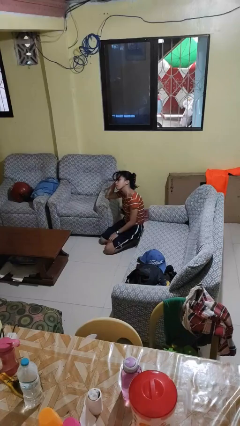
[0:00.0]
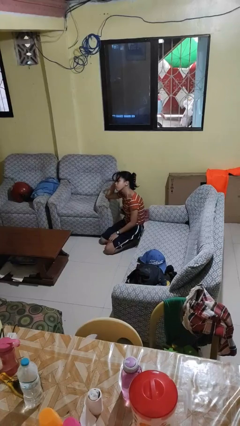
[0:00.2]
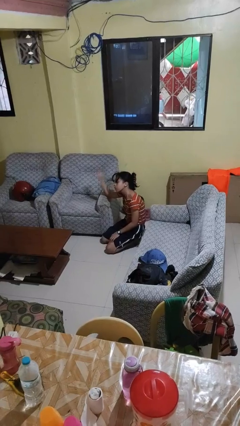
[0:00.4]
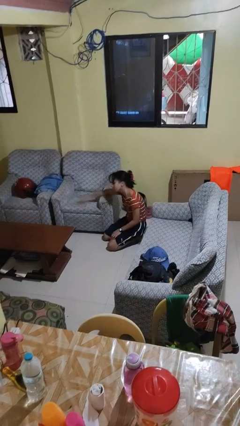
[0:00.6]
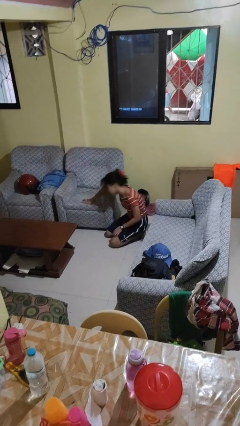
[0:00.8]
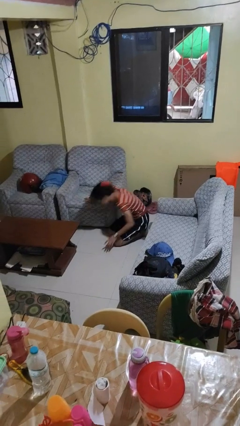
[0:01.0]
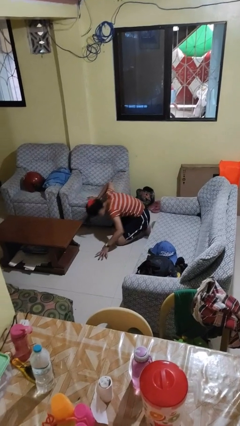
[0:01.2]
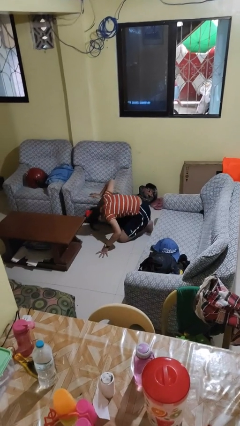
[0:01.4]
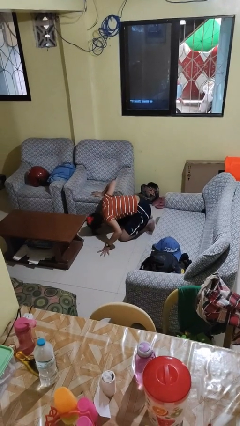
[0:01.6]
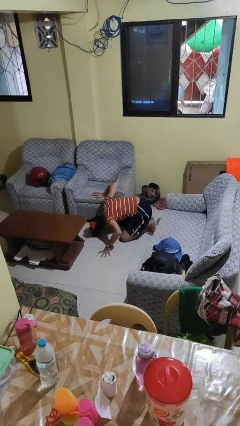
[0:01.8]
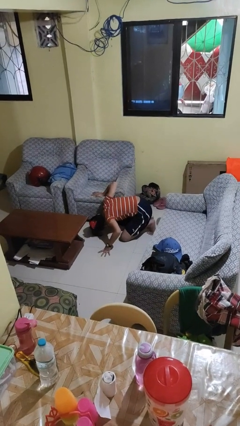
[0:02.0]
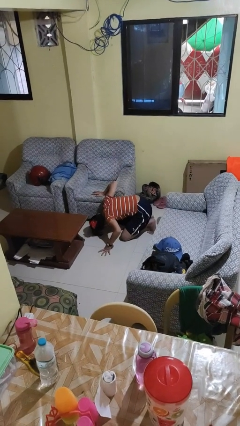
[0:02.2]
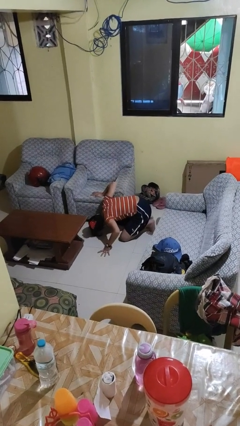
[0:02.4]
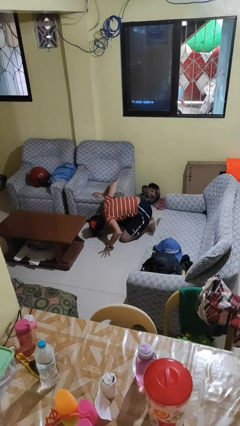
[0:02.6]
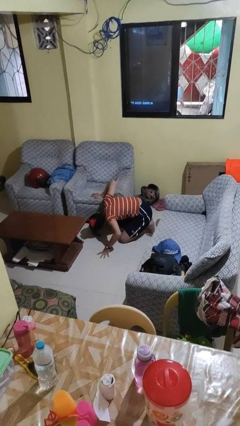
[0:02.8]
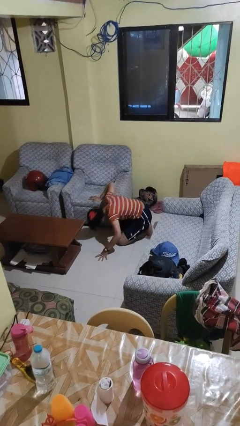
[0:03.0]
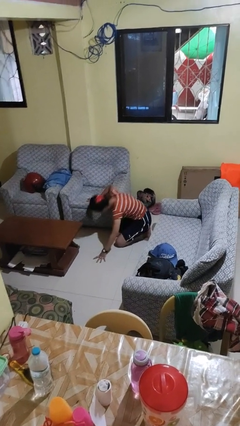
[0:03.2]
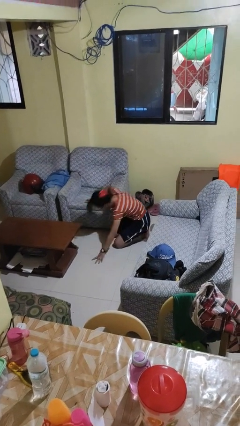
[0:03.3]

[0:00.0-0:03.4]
person searches under couch

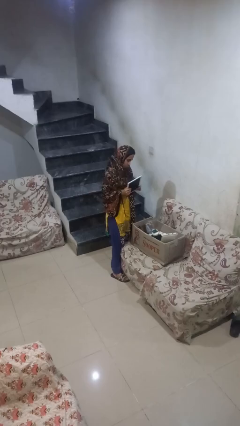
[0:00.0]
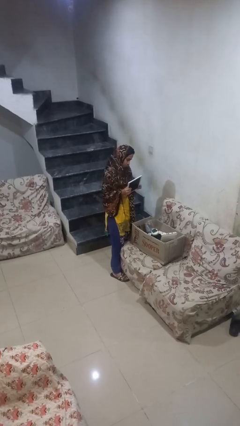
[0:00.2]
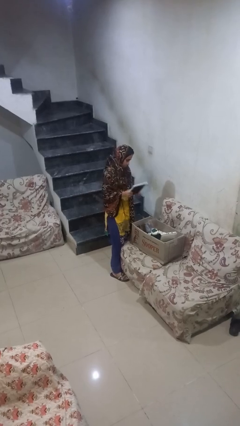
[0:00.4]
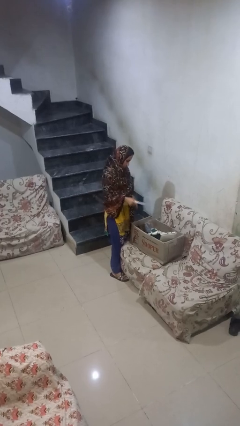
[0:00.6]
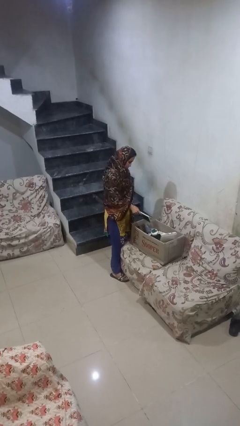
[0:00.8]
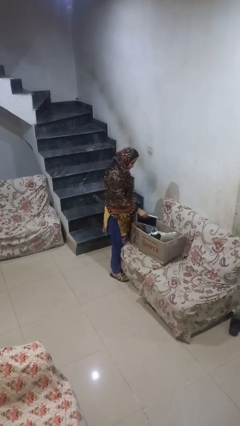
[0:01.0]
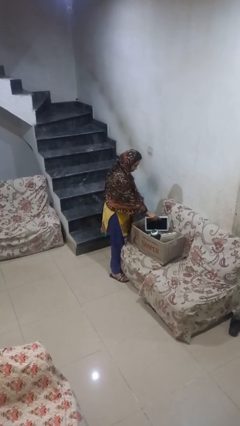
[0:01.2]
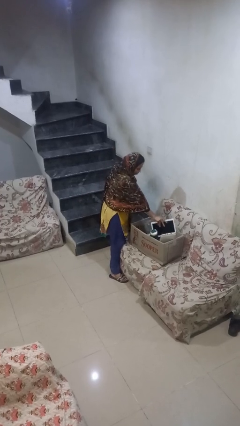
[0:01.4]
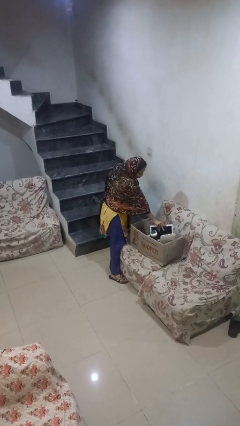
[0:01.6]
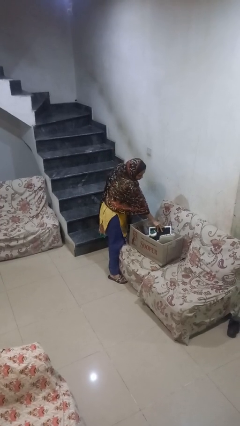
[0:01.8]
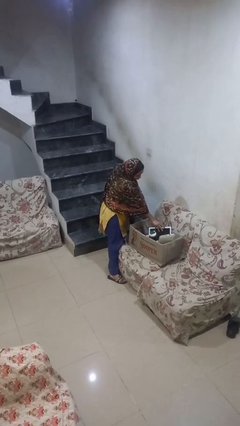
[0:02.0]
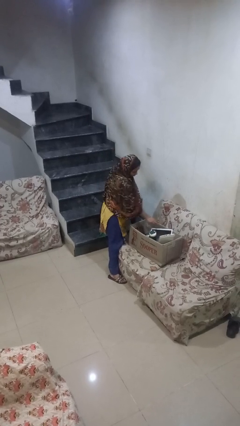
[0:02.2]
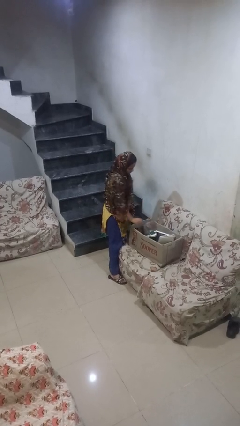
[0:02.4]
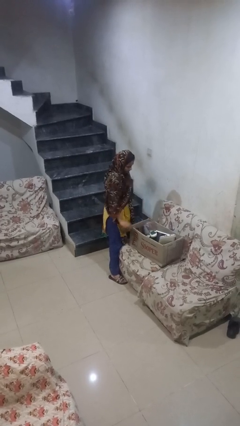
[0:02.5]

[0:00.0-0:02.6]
person puts object into box

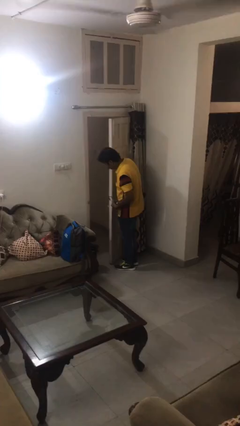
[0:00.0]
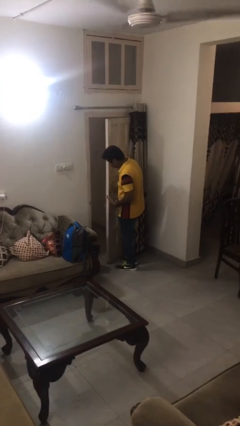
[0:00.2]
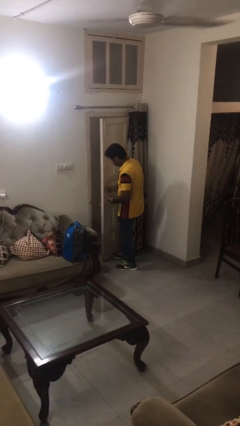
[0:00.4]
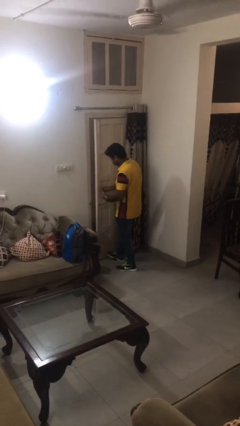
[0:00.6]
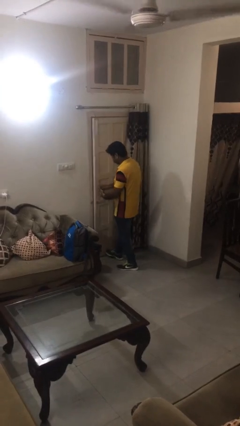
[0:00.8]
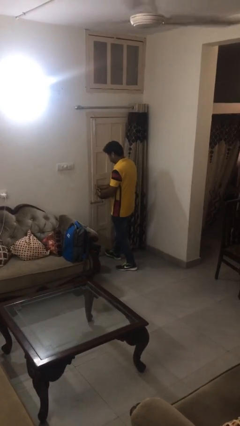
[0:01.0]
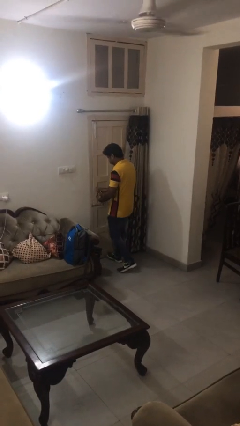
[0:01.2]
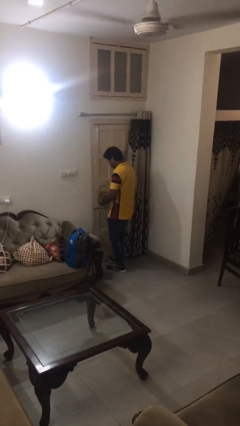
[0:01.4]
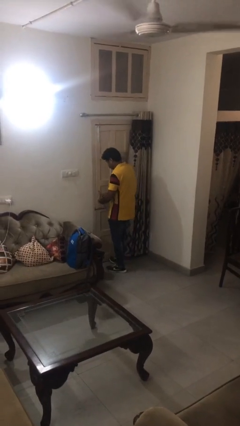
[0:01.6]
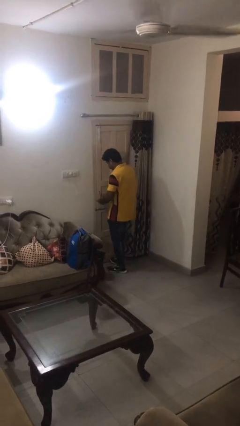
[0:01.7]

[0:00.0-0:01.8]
person closes facility door

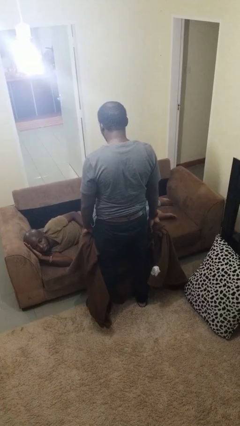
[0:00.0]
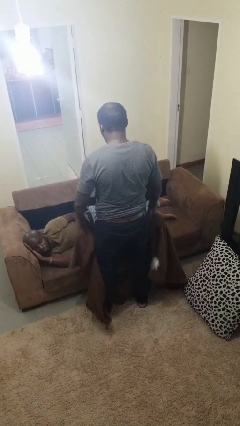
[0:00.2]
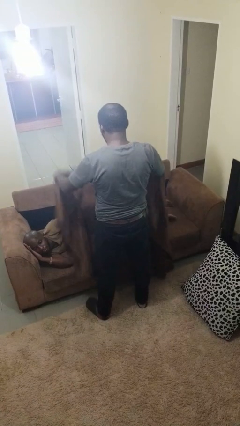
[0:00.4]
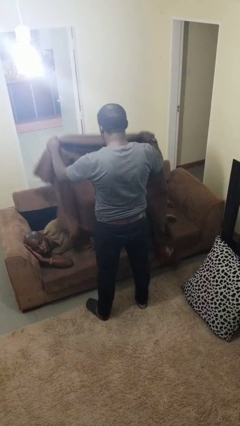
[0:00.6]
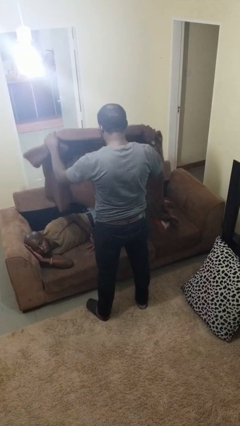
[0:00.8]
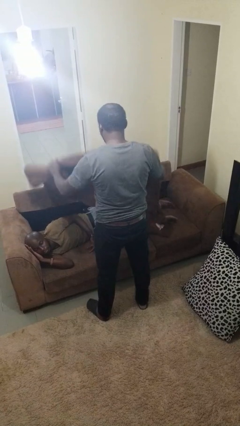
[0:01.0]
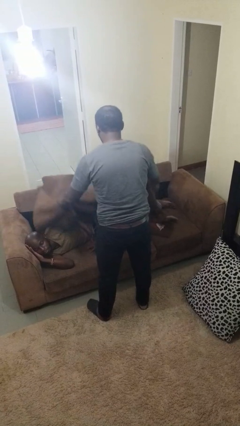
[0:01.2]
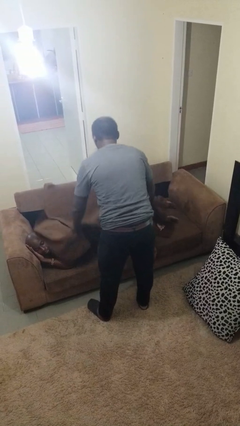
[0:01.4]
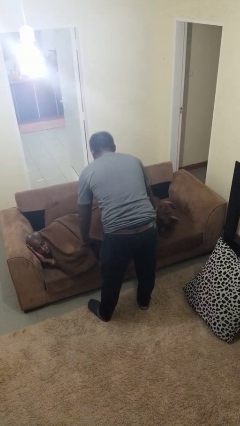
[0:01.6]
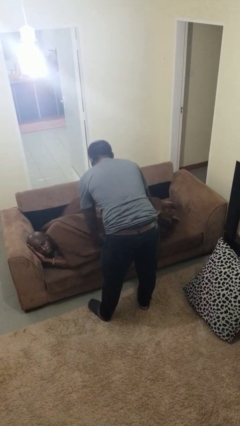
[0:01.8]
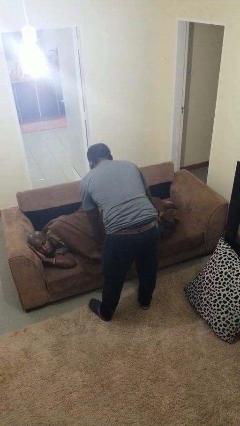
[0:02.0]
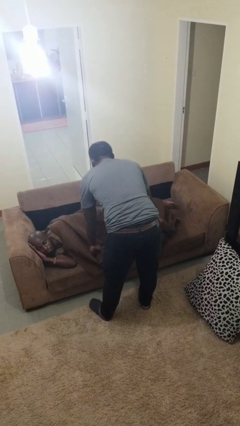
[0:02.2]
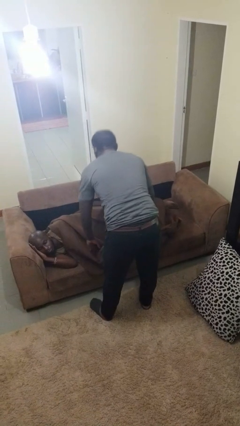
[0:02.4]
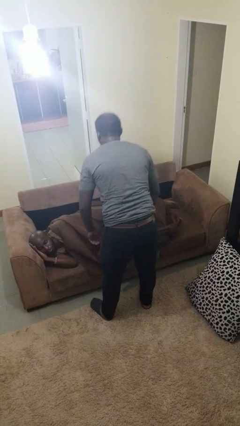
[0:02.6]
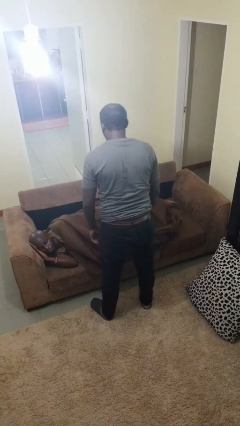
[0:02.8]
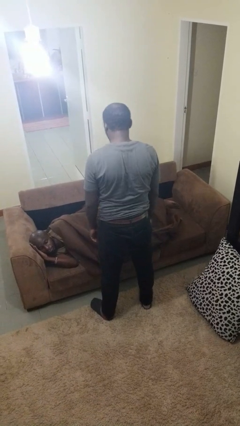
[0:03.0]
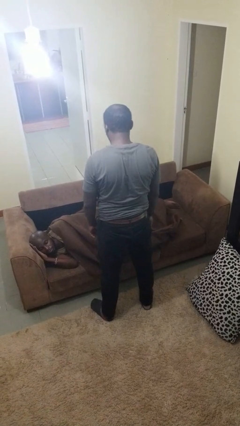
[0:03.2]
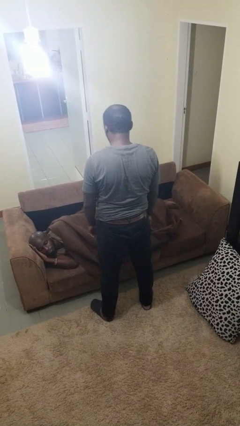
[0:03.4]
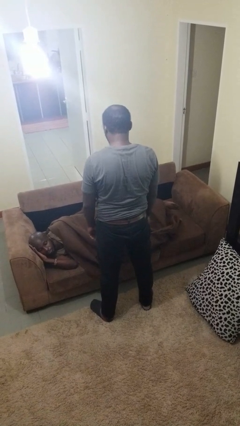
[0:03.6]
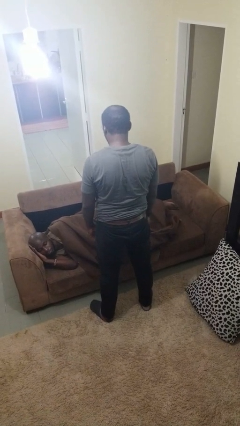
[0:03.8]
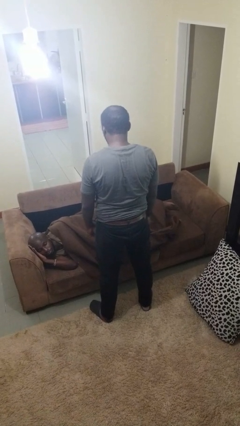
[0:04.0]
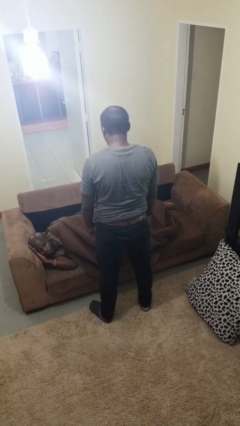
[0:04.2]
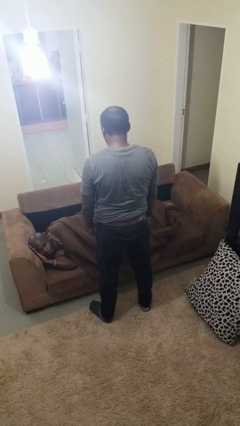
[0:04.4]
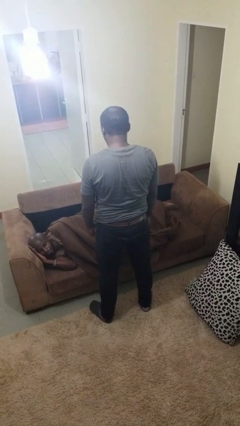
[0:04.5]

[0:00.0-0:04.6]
person covers friend with blanket

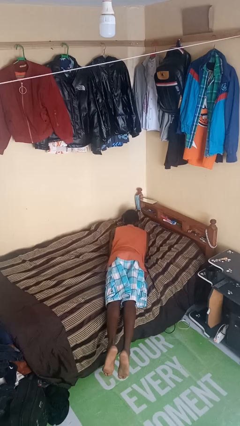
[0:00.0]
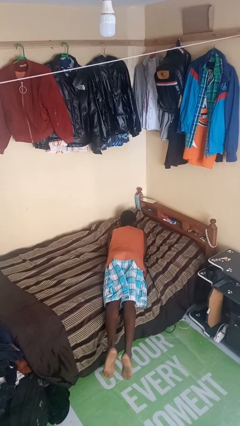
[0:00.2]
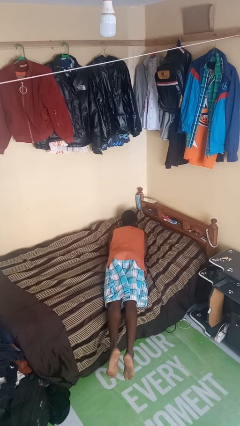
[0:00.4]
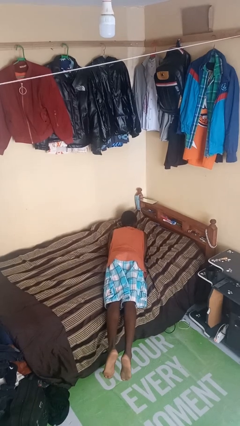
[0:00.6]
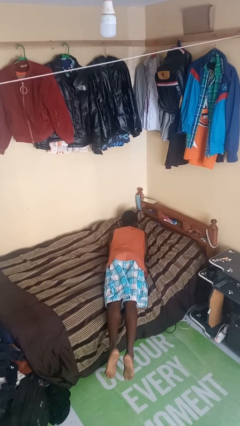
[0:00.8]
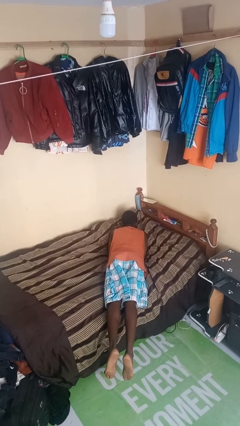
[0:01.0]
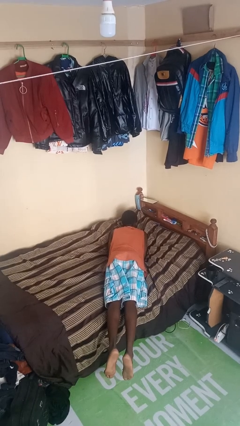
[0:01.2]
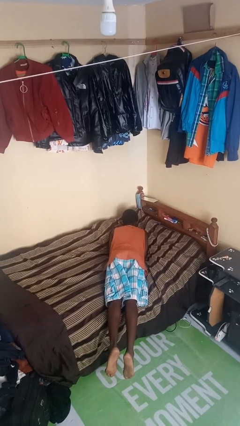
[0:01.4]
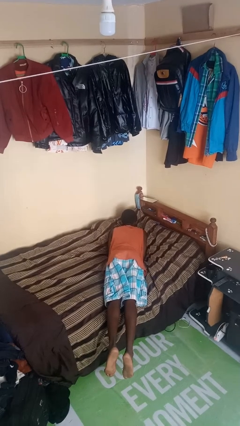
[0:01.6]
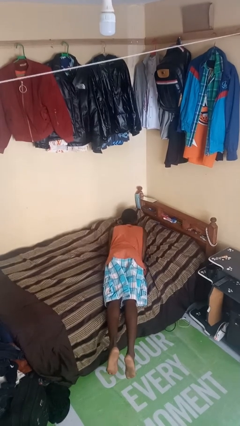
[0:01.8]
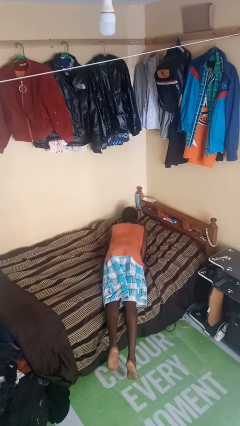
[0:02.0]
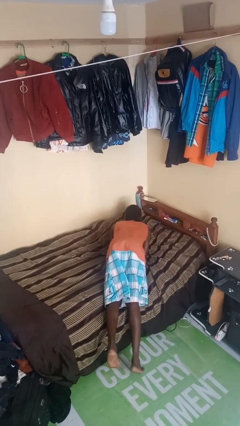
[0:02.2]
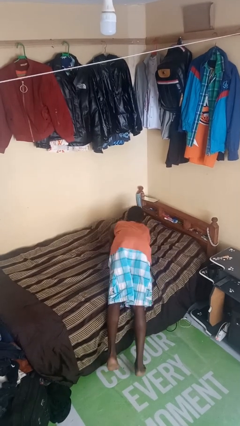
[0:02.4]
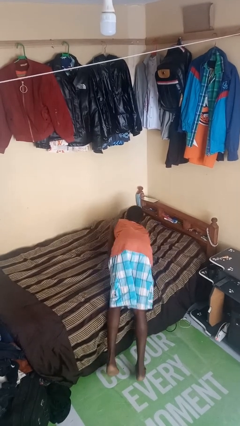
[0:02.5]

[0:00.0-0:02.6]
person lies down on bed

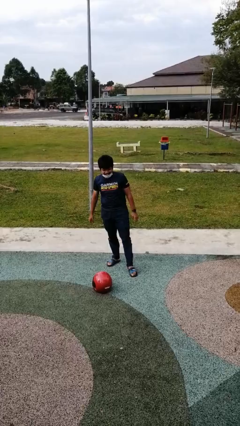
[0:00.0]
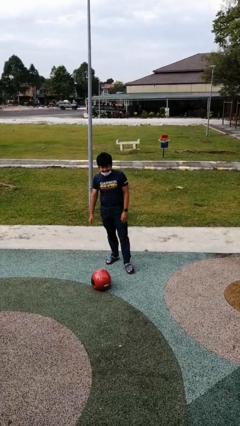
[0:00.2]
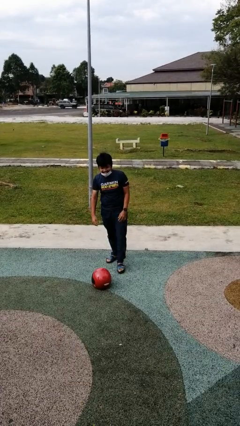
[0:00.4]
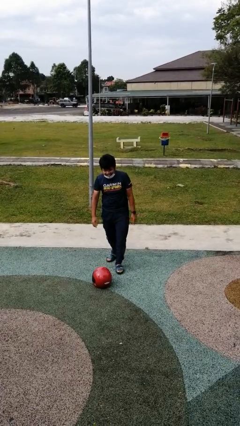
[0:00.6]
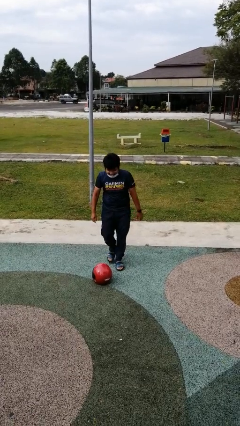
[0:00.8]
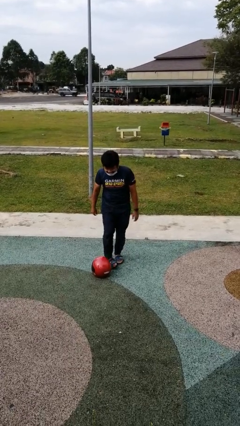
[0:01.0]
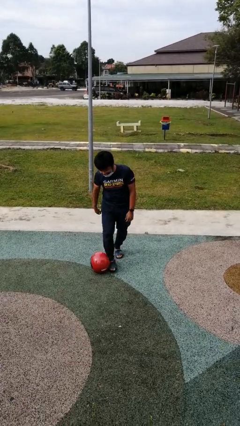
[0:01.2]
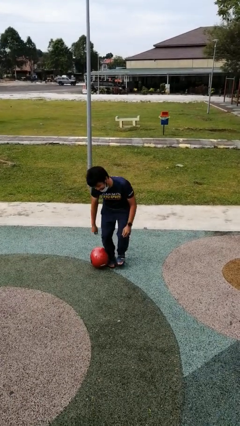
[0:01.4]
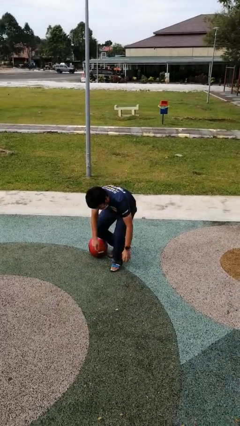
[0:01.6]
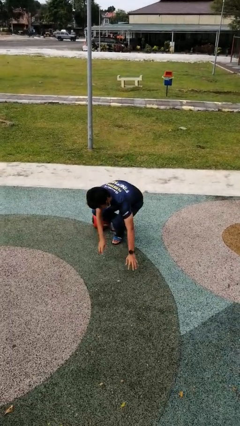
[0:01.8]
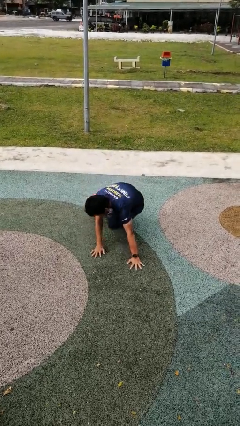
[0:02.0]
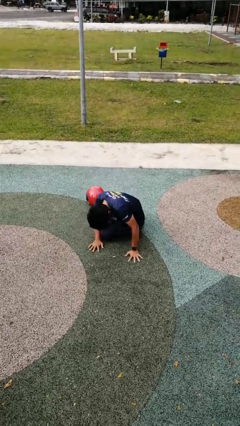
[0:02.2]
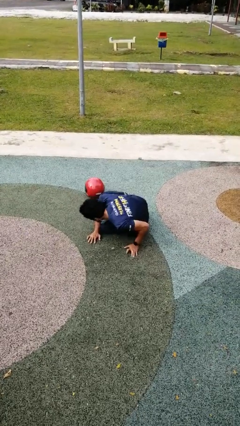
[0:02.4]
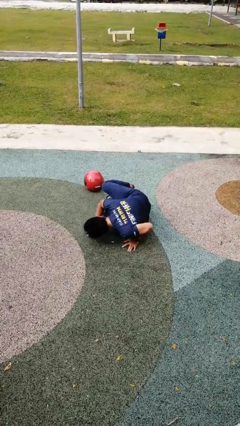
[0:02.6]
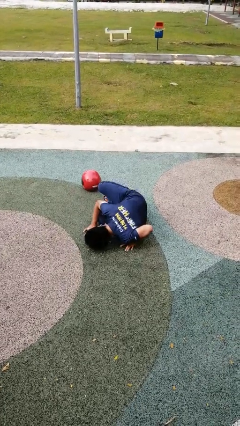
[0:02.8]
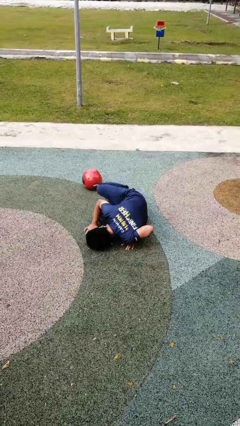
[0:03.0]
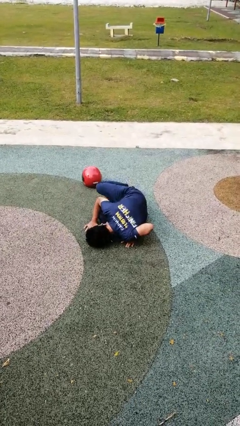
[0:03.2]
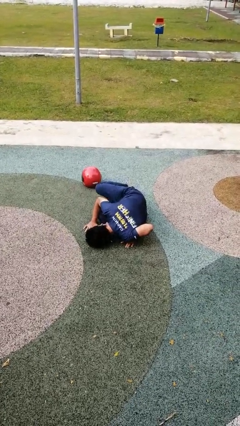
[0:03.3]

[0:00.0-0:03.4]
person trips on object on floor
